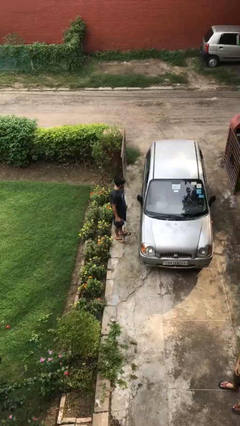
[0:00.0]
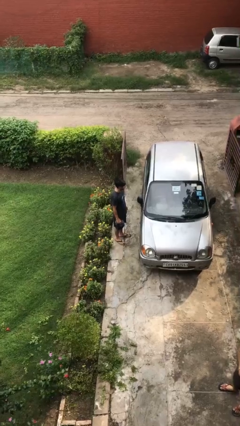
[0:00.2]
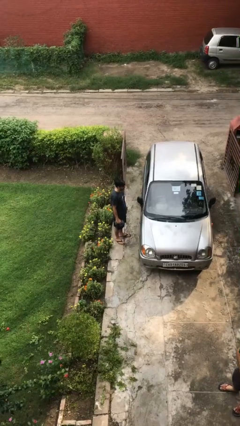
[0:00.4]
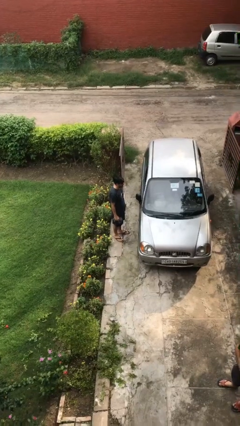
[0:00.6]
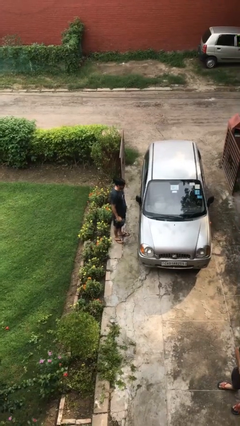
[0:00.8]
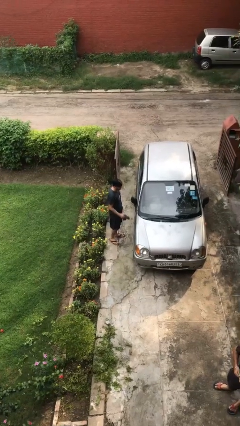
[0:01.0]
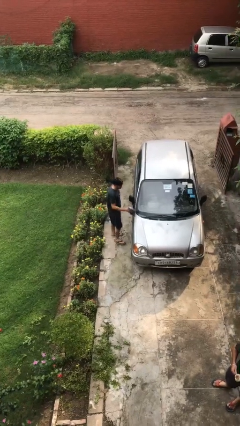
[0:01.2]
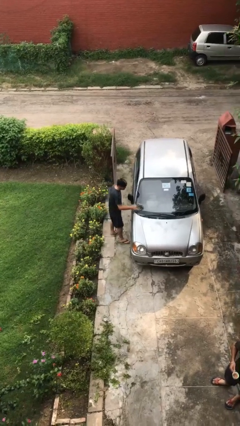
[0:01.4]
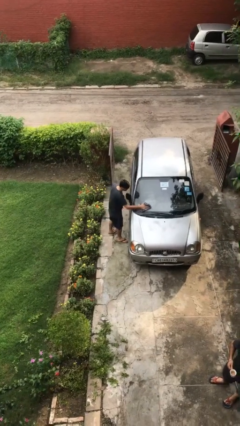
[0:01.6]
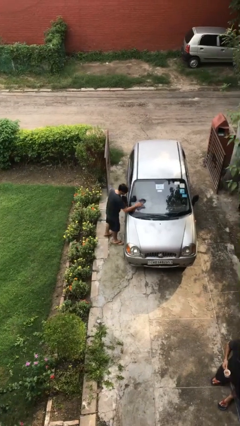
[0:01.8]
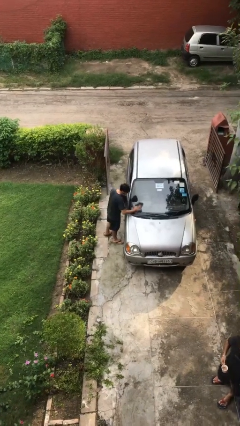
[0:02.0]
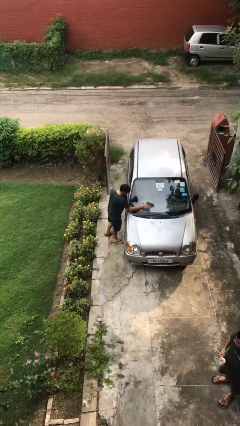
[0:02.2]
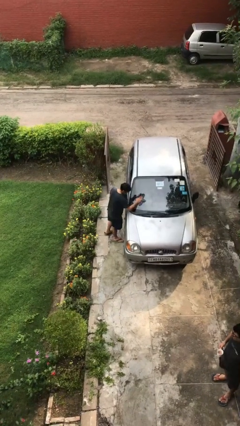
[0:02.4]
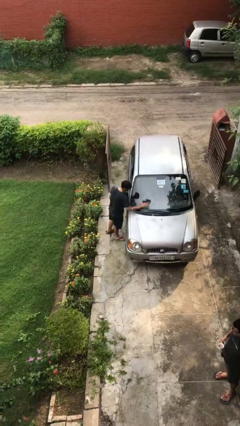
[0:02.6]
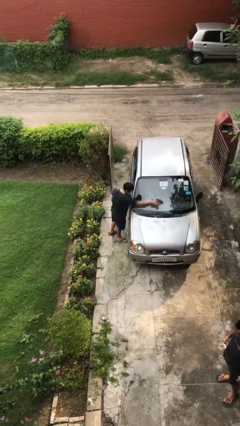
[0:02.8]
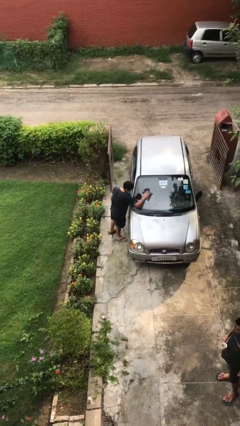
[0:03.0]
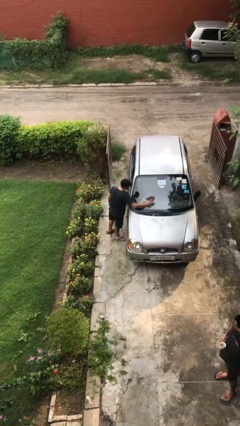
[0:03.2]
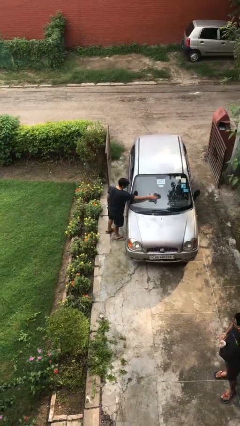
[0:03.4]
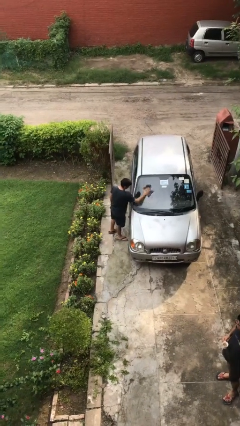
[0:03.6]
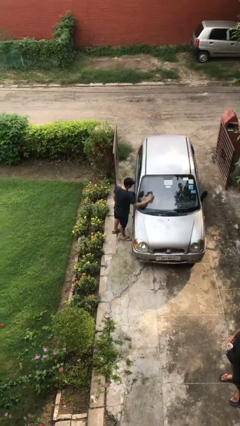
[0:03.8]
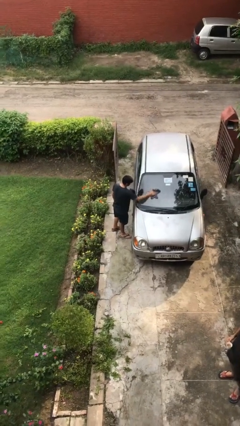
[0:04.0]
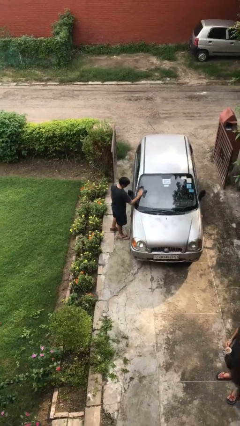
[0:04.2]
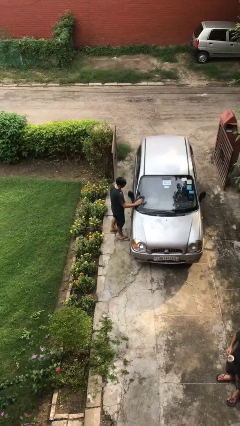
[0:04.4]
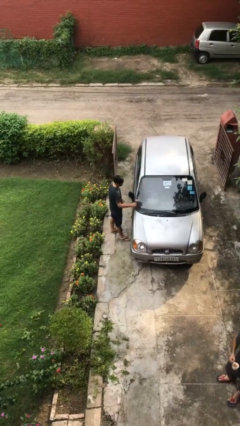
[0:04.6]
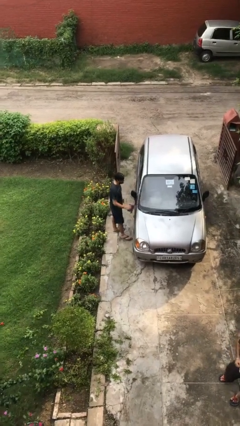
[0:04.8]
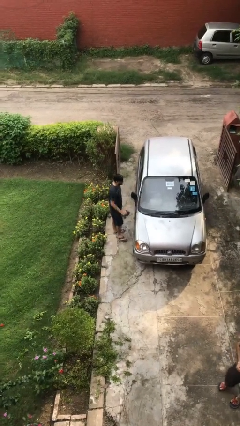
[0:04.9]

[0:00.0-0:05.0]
person polishes car with rag

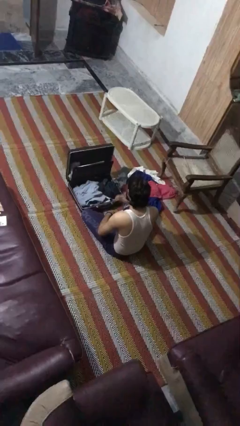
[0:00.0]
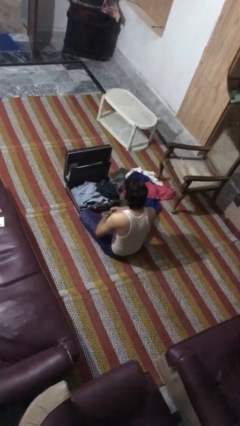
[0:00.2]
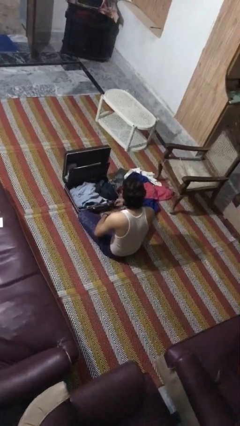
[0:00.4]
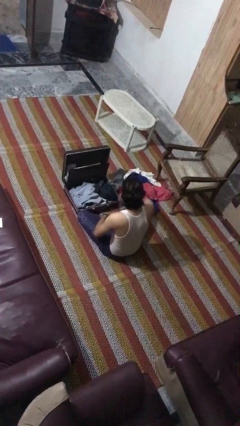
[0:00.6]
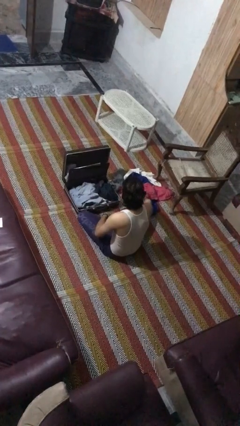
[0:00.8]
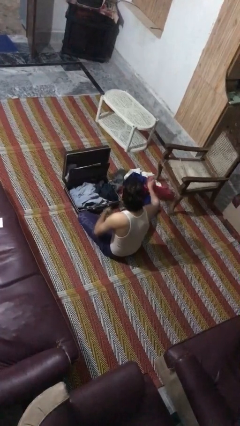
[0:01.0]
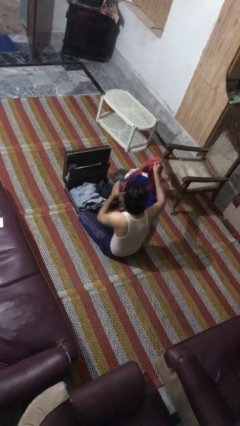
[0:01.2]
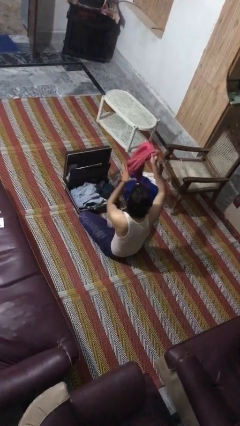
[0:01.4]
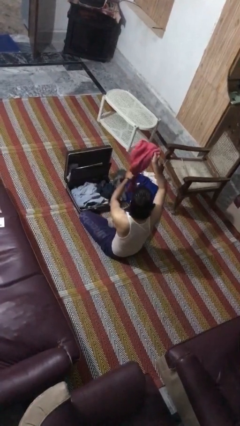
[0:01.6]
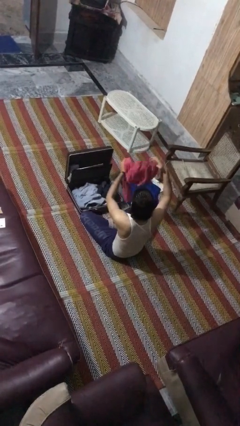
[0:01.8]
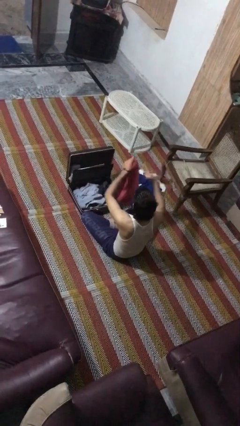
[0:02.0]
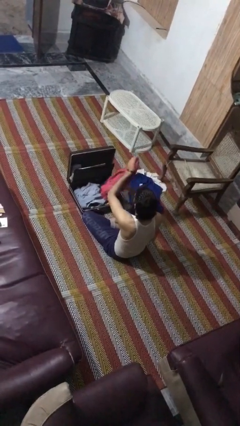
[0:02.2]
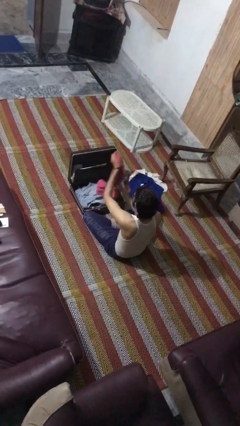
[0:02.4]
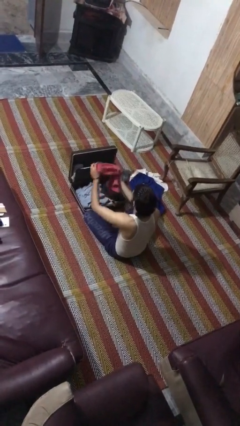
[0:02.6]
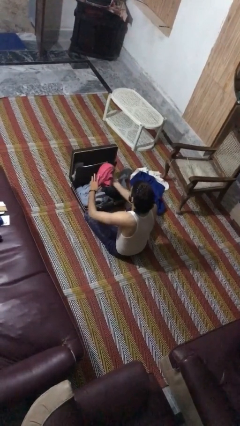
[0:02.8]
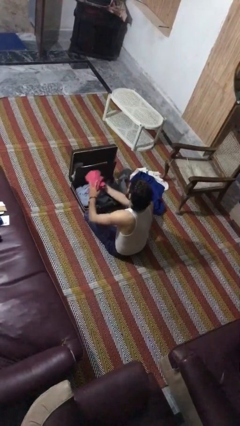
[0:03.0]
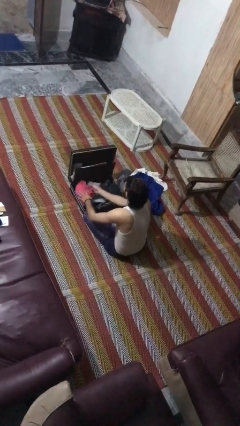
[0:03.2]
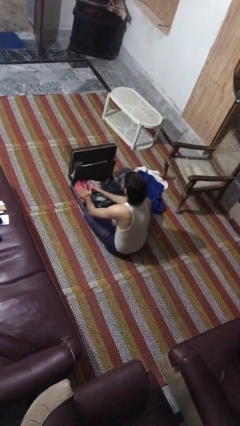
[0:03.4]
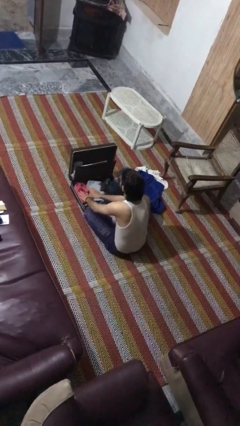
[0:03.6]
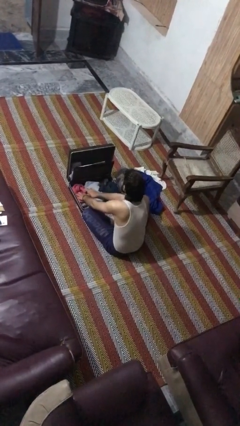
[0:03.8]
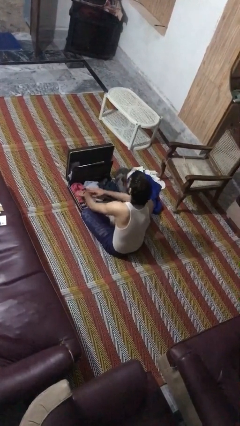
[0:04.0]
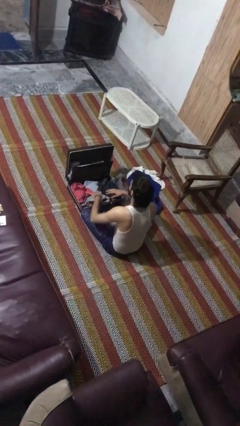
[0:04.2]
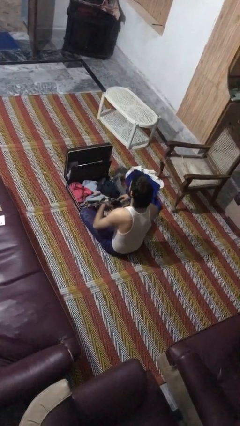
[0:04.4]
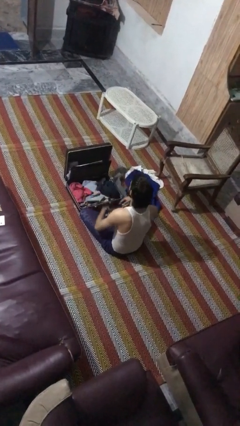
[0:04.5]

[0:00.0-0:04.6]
person loads clothes into suitcase

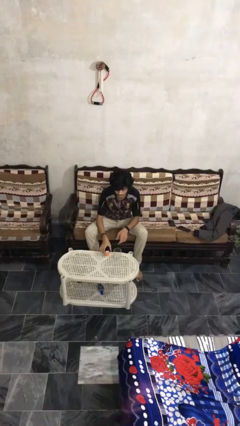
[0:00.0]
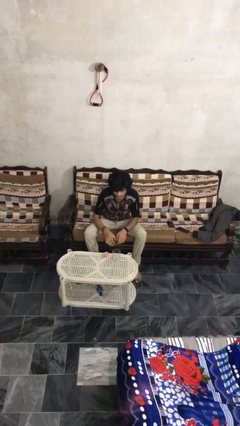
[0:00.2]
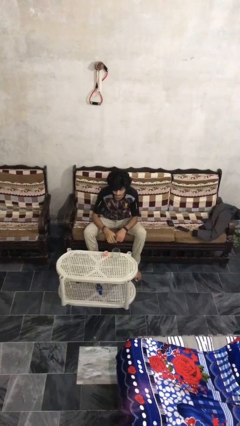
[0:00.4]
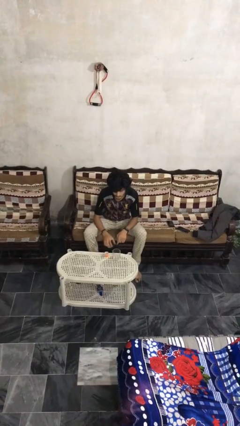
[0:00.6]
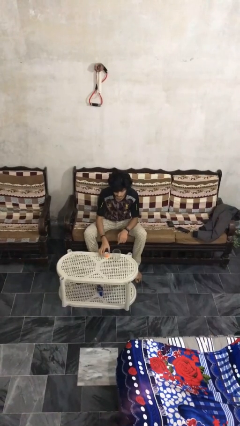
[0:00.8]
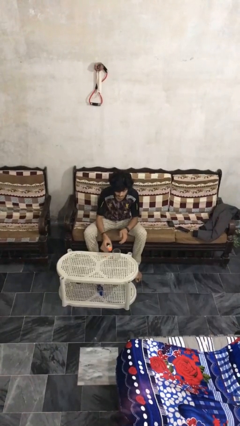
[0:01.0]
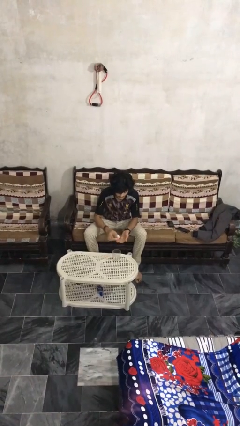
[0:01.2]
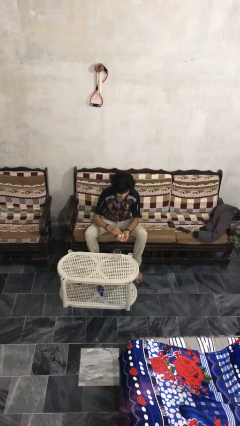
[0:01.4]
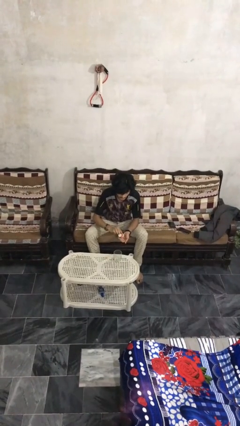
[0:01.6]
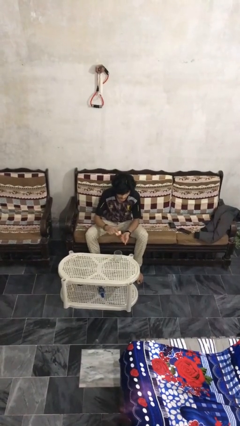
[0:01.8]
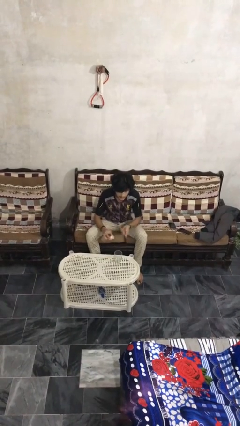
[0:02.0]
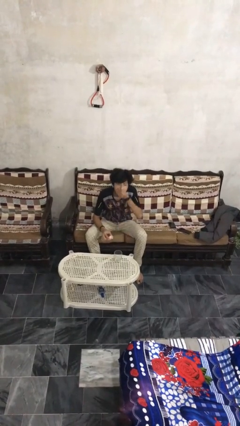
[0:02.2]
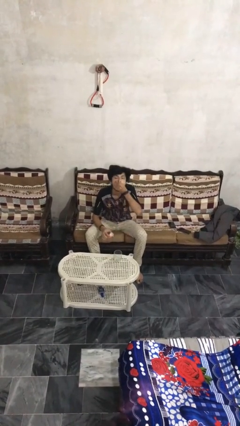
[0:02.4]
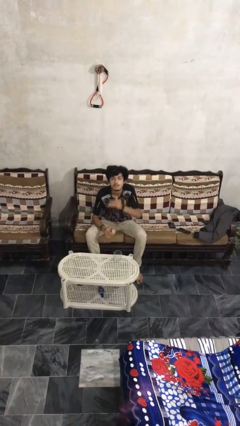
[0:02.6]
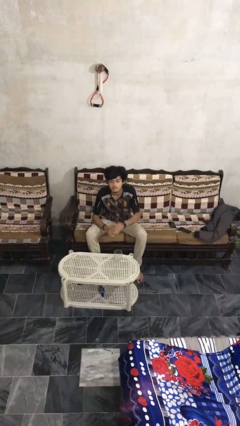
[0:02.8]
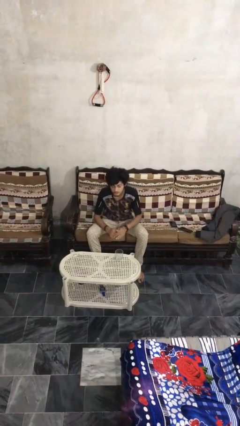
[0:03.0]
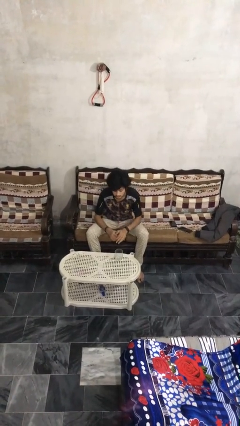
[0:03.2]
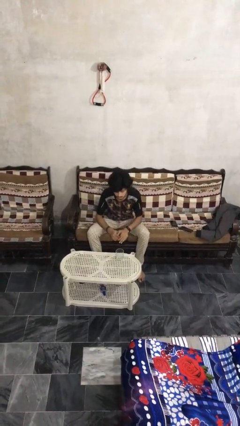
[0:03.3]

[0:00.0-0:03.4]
person takes medicine pills

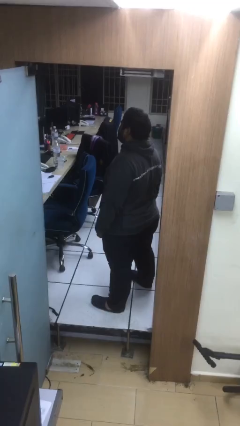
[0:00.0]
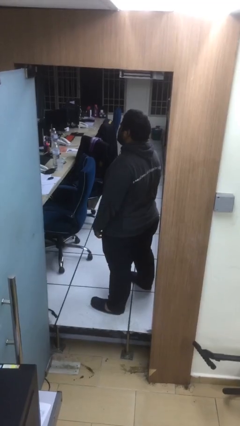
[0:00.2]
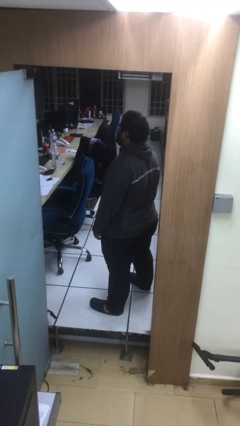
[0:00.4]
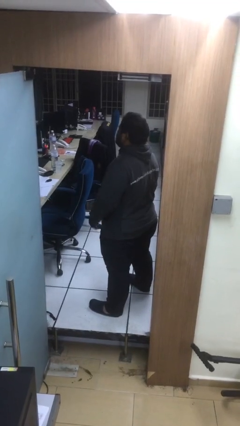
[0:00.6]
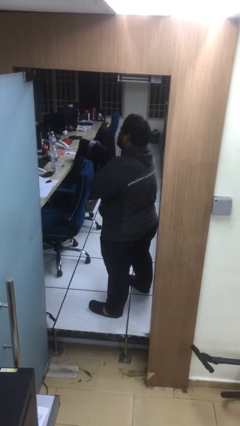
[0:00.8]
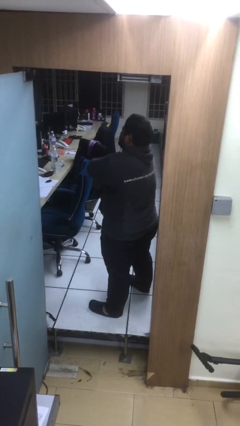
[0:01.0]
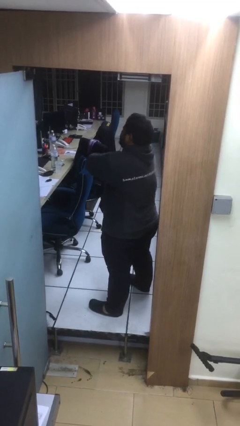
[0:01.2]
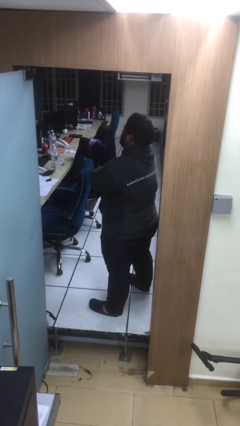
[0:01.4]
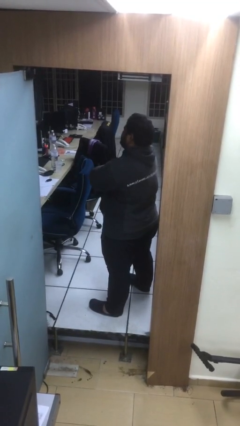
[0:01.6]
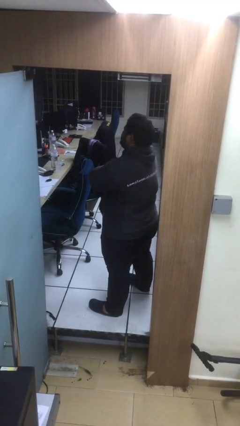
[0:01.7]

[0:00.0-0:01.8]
person crosses arms

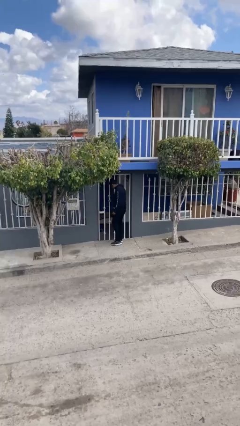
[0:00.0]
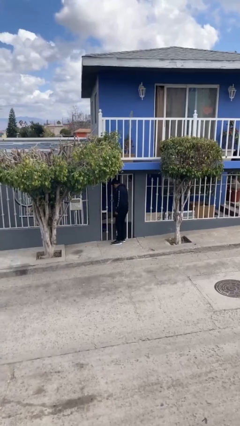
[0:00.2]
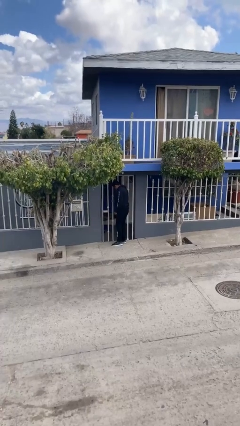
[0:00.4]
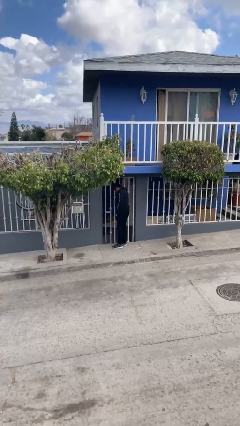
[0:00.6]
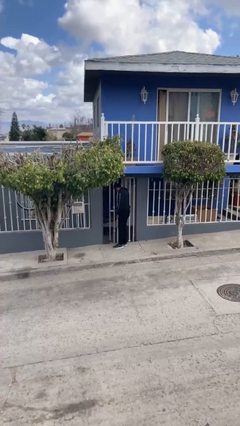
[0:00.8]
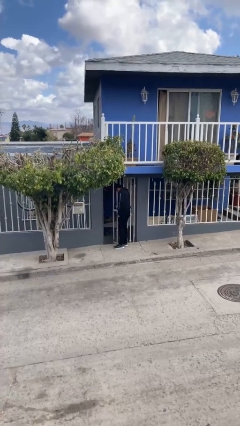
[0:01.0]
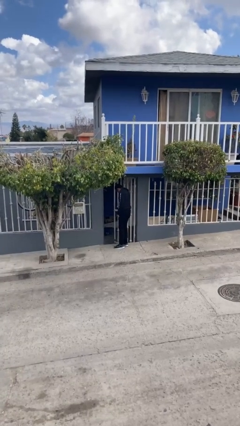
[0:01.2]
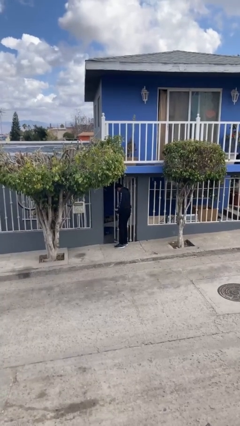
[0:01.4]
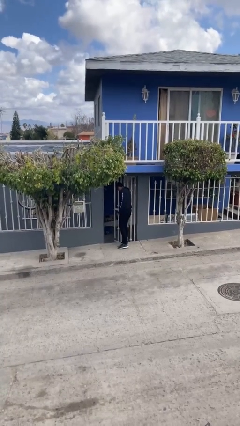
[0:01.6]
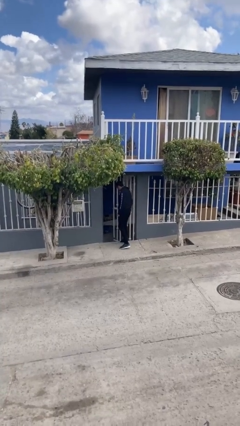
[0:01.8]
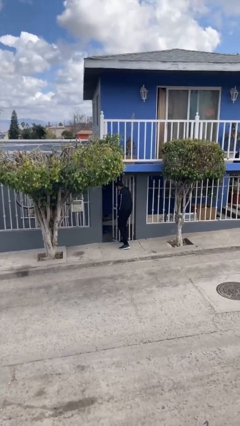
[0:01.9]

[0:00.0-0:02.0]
person opens facility door

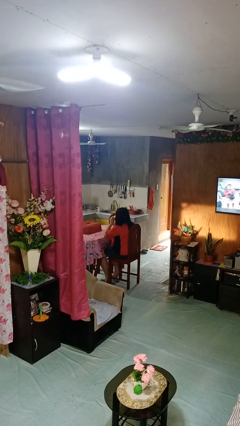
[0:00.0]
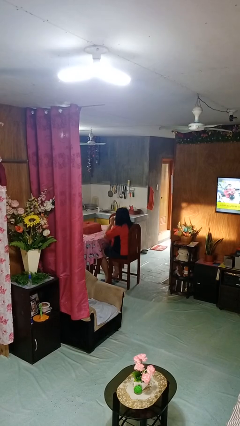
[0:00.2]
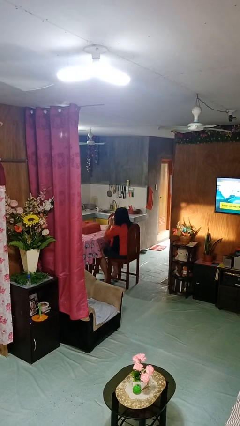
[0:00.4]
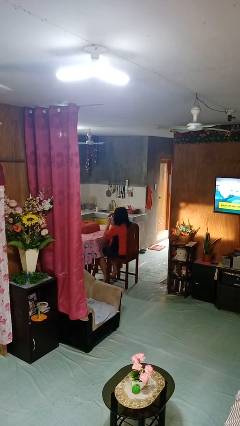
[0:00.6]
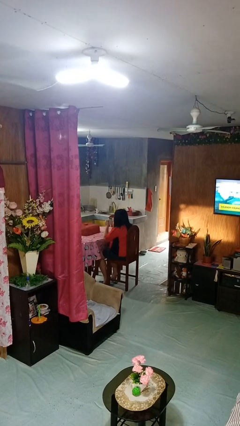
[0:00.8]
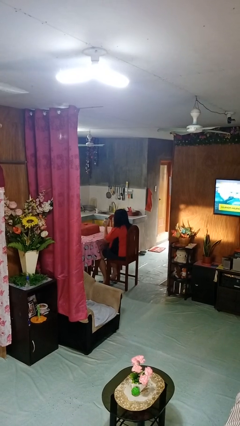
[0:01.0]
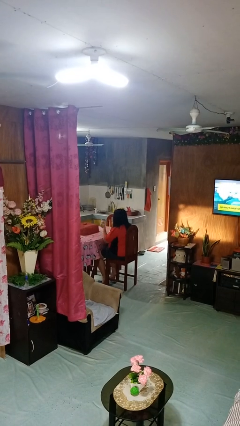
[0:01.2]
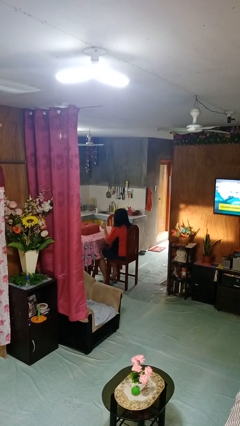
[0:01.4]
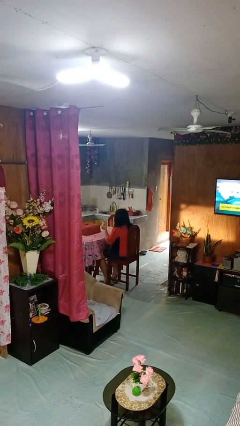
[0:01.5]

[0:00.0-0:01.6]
person puts down object on table
